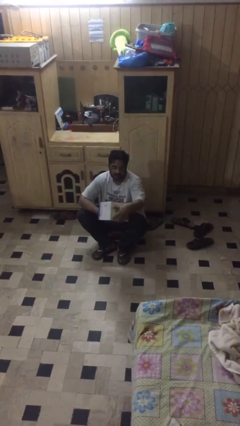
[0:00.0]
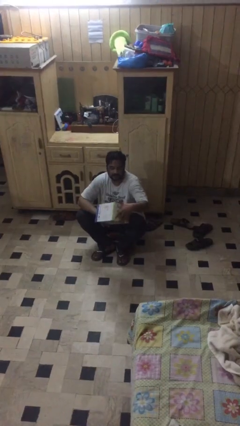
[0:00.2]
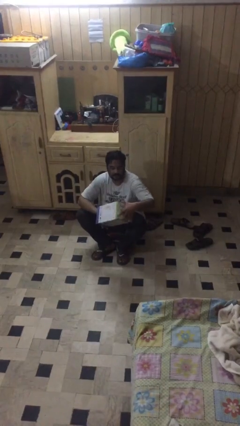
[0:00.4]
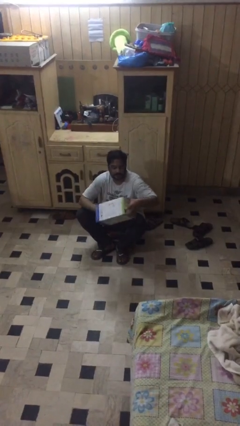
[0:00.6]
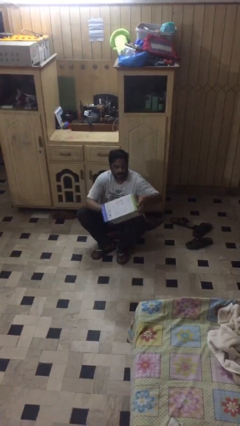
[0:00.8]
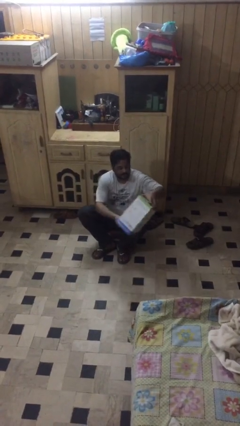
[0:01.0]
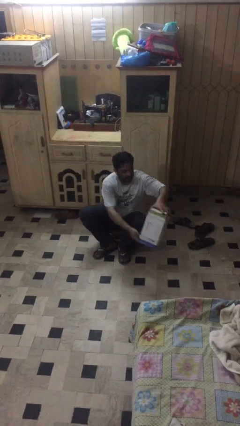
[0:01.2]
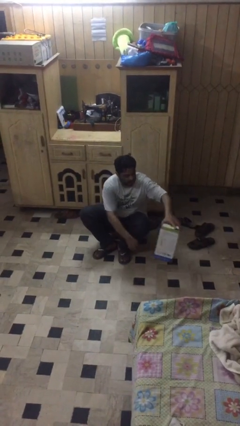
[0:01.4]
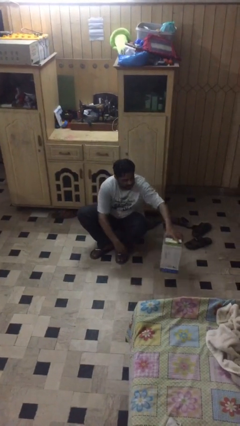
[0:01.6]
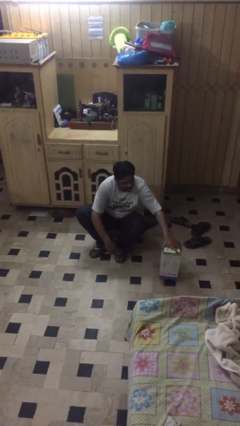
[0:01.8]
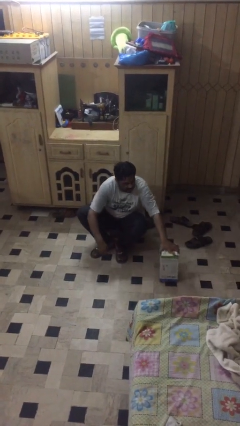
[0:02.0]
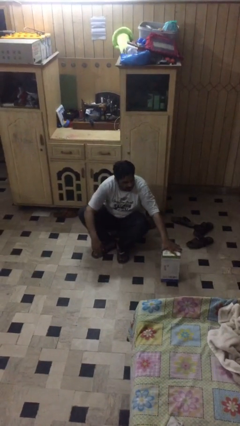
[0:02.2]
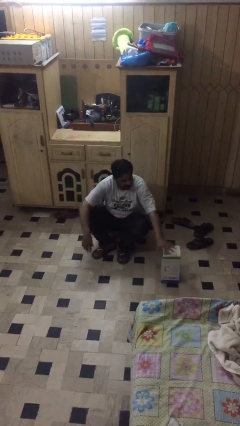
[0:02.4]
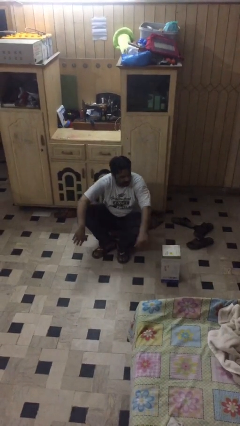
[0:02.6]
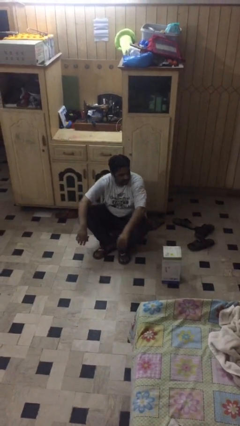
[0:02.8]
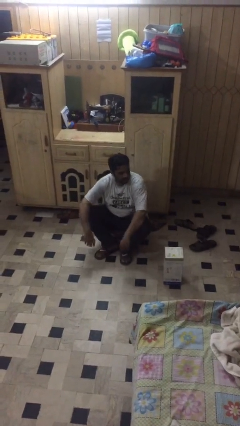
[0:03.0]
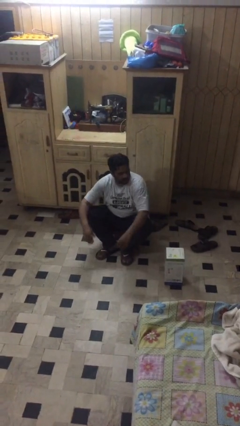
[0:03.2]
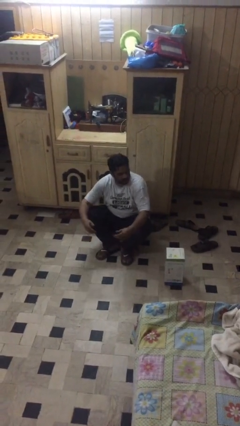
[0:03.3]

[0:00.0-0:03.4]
person puts down object on floor

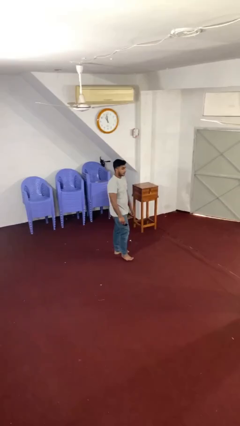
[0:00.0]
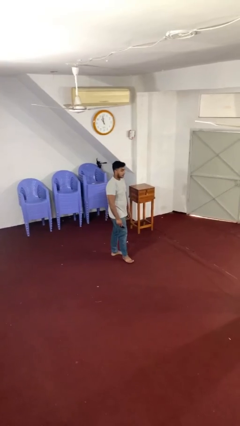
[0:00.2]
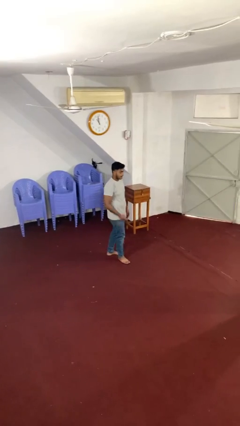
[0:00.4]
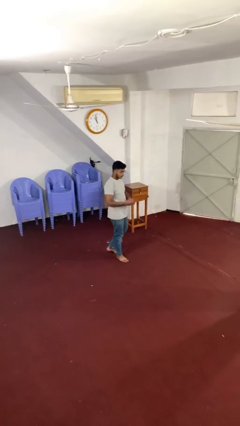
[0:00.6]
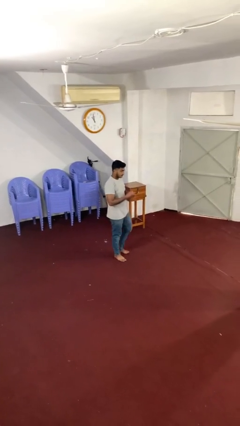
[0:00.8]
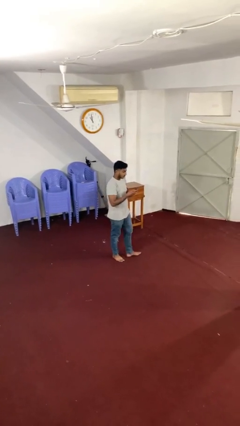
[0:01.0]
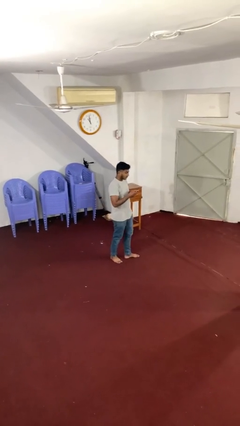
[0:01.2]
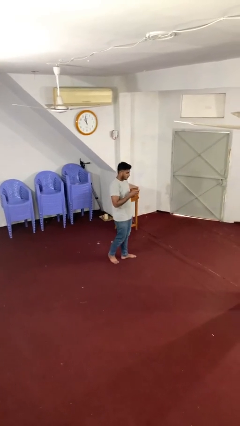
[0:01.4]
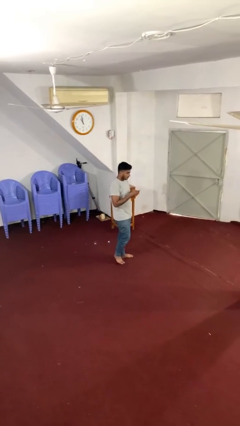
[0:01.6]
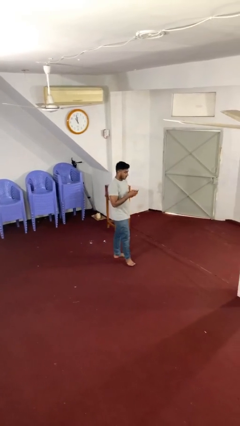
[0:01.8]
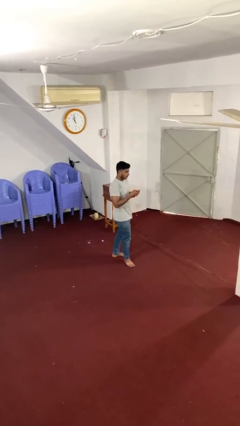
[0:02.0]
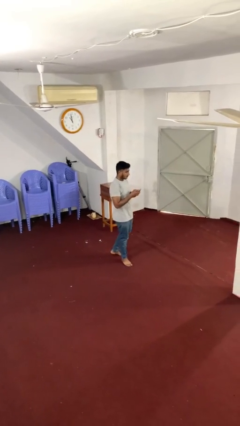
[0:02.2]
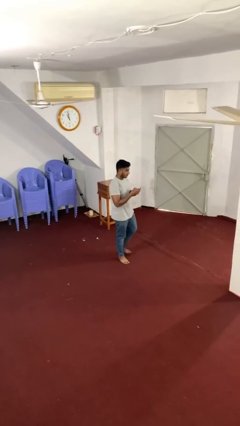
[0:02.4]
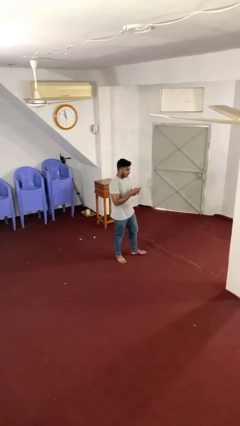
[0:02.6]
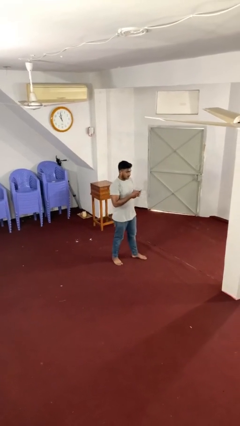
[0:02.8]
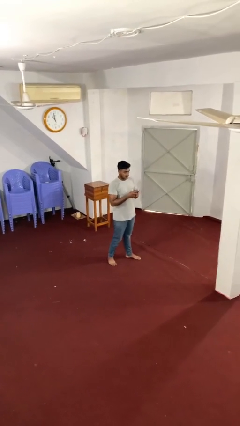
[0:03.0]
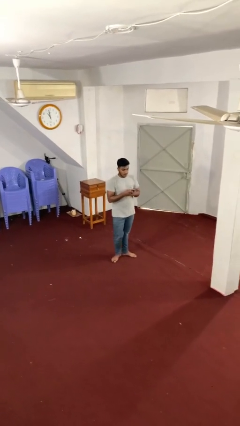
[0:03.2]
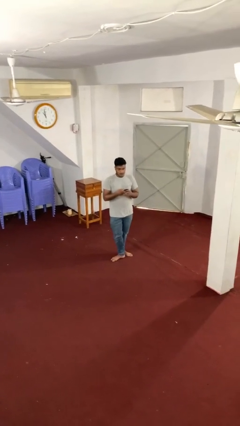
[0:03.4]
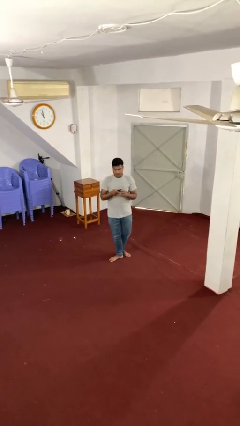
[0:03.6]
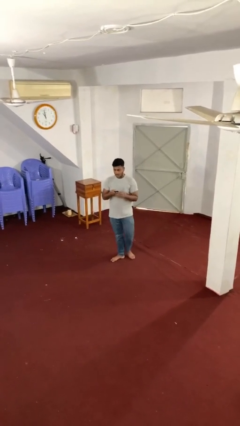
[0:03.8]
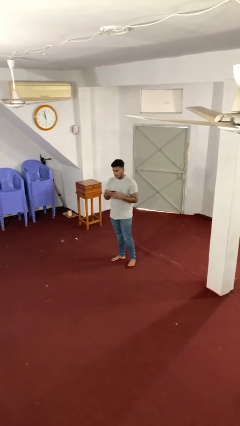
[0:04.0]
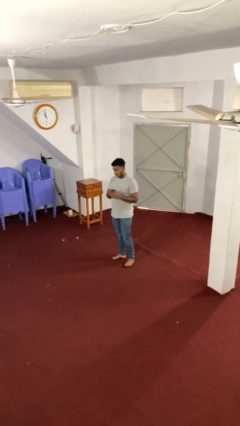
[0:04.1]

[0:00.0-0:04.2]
person texts on phone

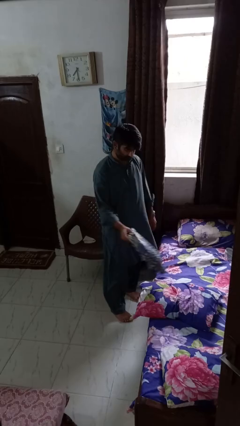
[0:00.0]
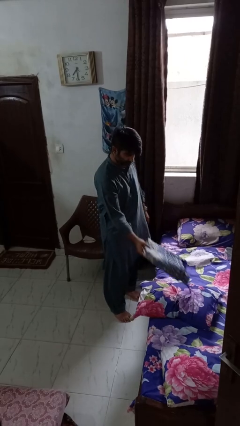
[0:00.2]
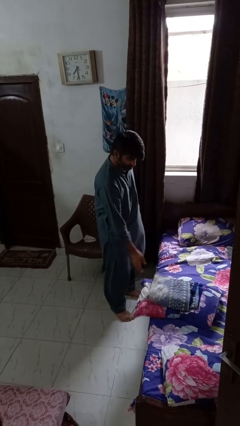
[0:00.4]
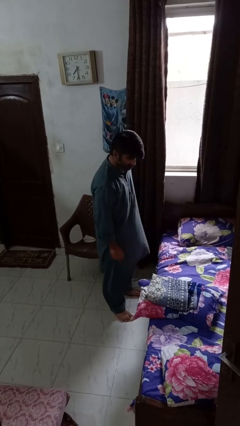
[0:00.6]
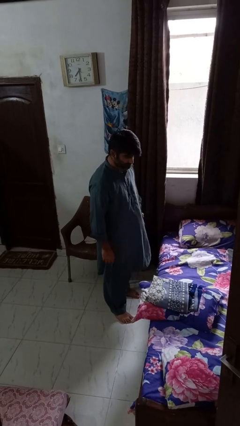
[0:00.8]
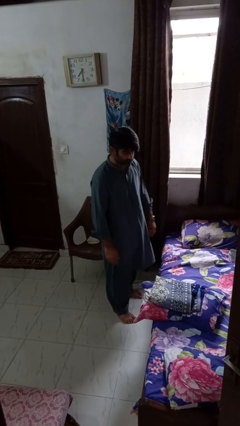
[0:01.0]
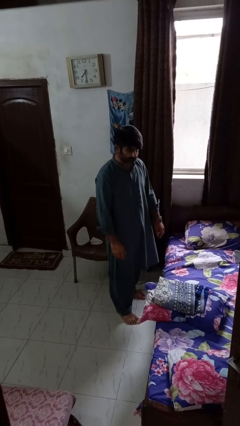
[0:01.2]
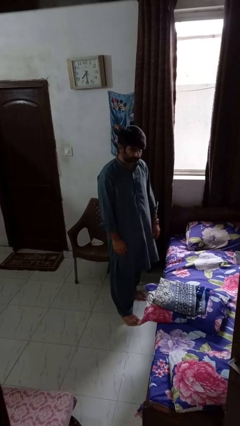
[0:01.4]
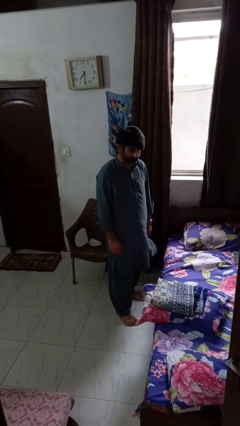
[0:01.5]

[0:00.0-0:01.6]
person puts down object on bed

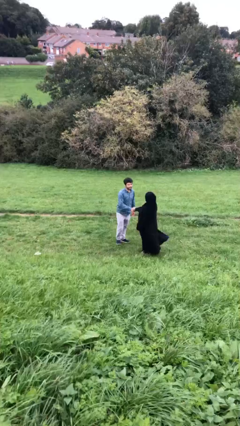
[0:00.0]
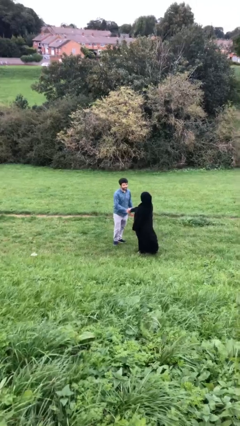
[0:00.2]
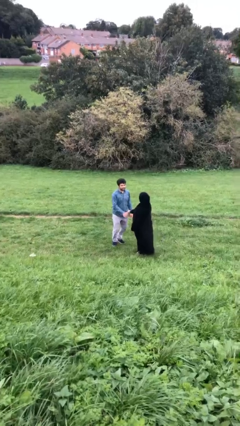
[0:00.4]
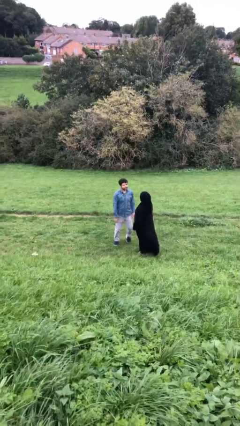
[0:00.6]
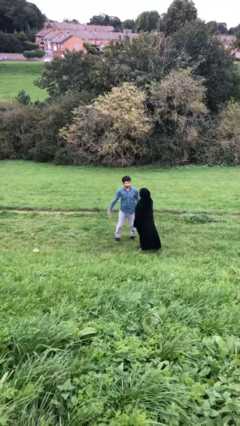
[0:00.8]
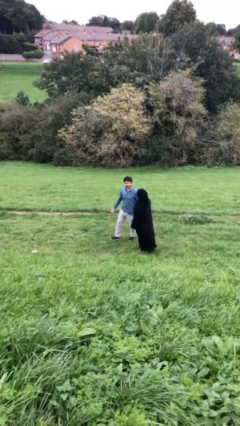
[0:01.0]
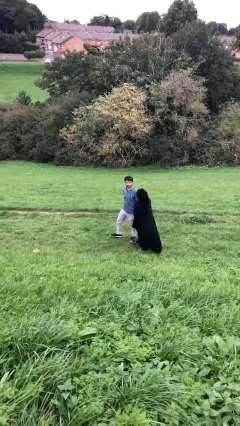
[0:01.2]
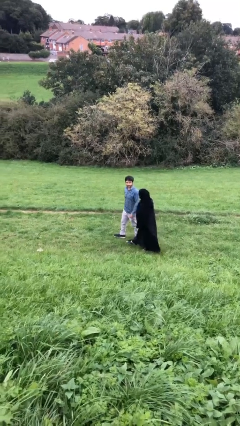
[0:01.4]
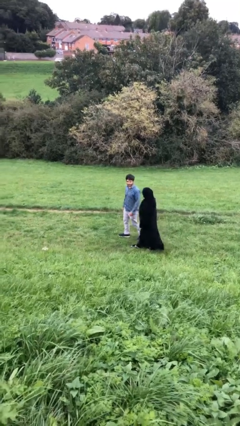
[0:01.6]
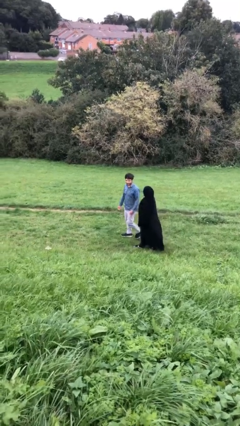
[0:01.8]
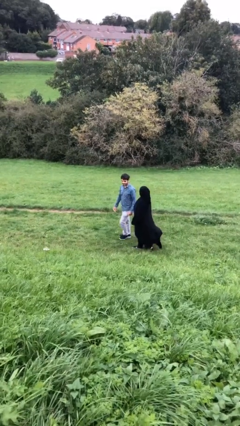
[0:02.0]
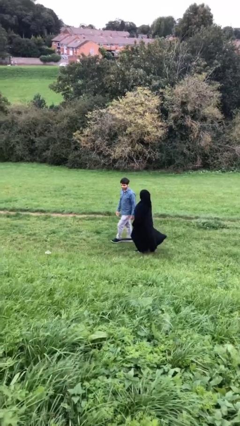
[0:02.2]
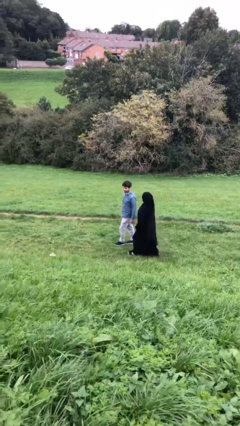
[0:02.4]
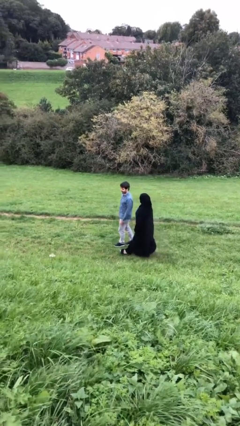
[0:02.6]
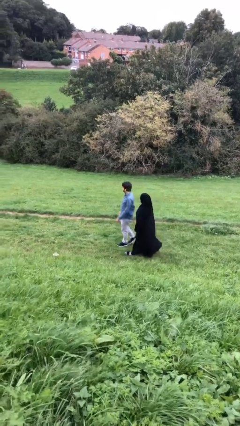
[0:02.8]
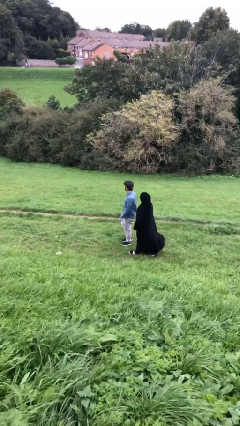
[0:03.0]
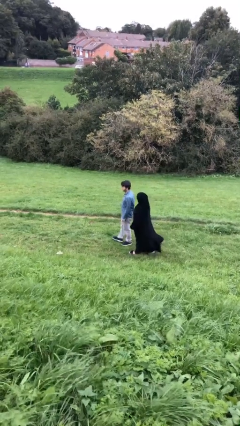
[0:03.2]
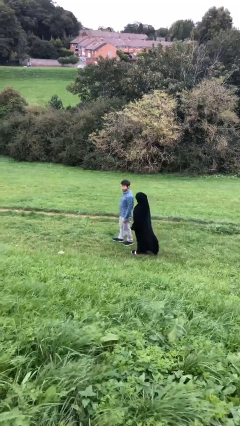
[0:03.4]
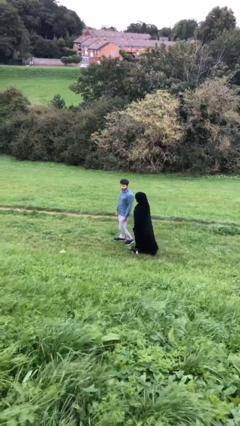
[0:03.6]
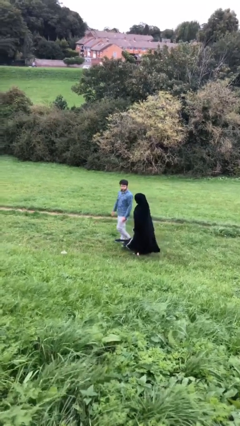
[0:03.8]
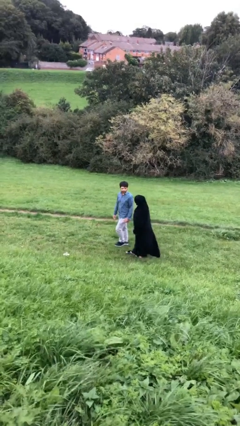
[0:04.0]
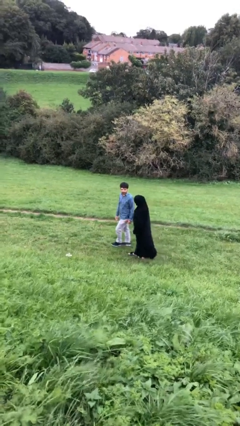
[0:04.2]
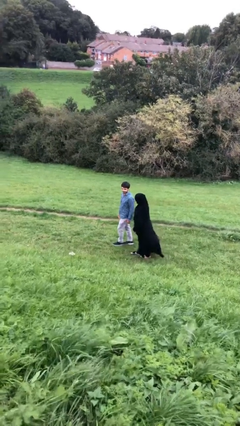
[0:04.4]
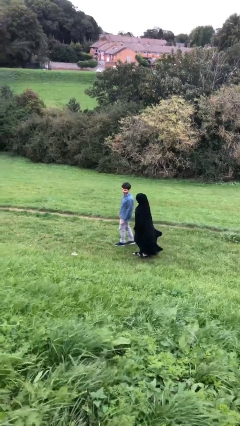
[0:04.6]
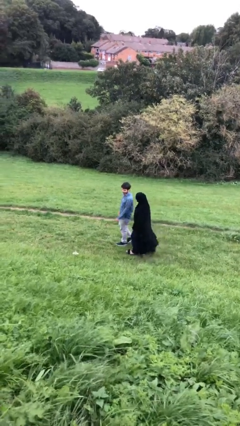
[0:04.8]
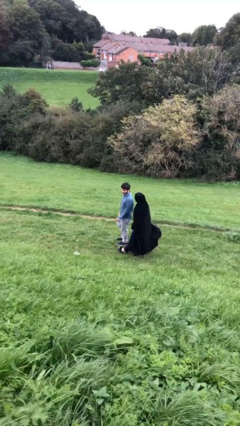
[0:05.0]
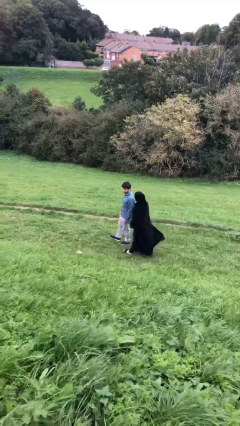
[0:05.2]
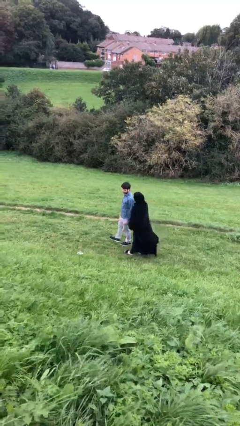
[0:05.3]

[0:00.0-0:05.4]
person talks to person

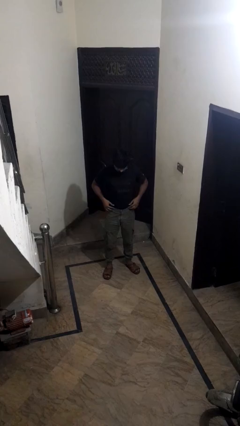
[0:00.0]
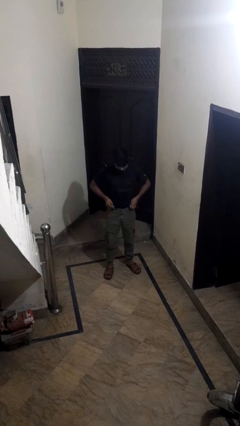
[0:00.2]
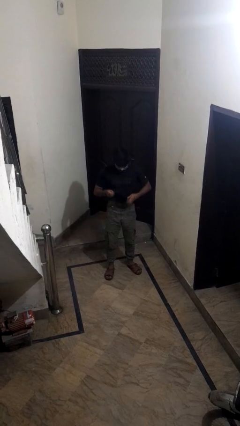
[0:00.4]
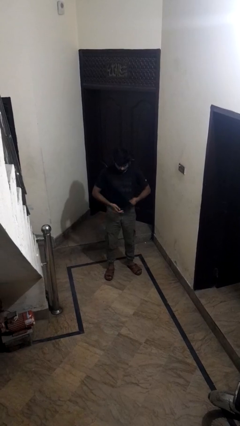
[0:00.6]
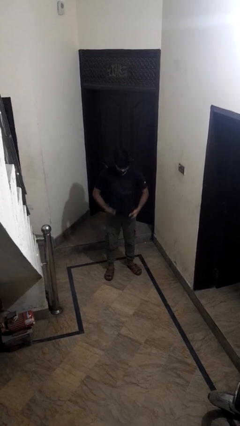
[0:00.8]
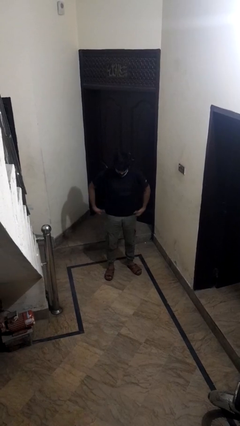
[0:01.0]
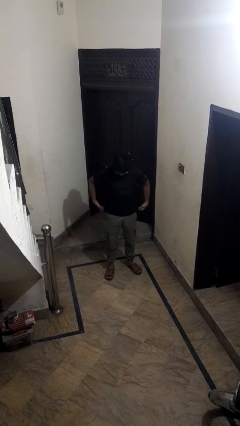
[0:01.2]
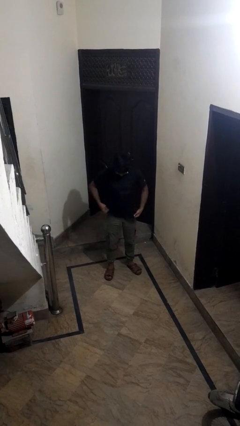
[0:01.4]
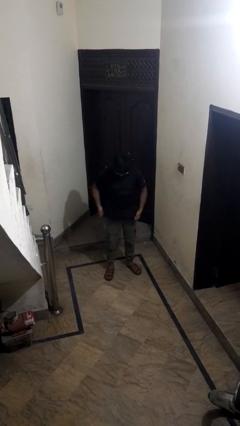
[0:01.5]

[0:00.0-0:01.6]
person untucks shirt

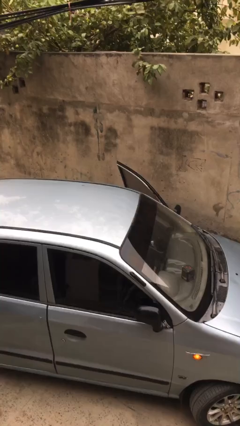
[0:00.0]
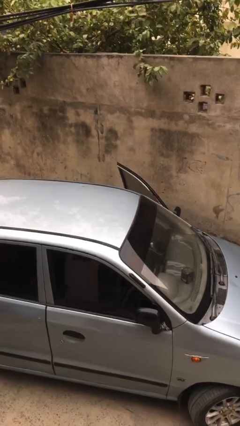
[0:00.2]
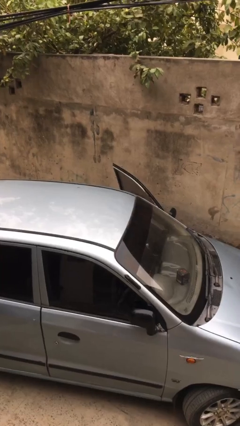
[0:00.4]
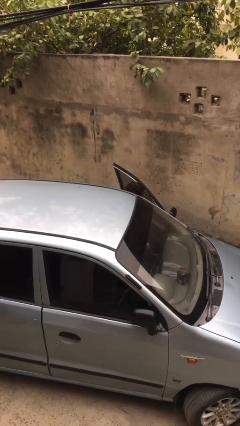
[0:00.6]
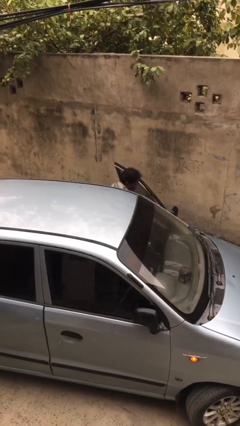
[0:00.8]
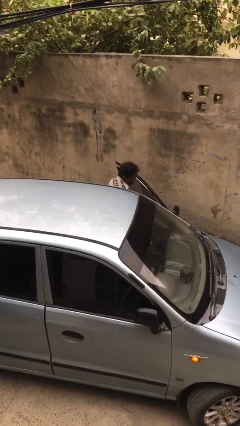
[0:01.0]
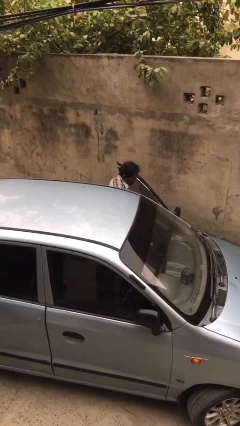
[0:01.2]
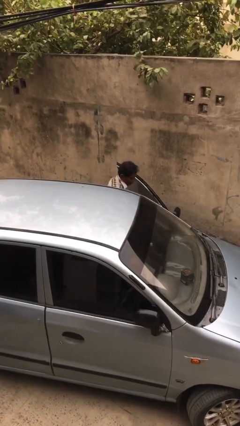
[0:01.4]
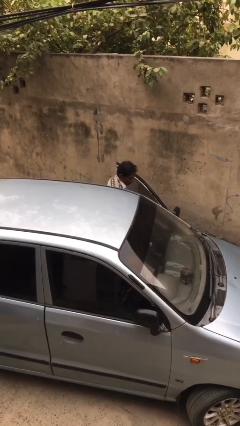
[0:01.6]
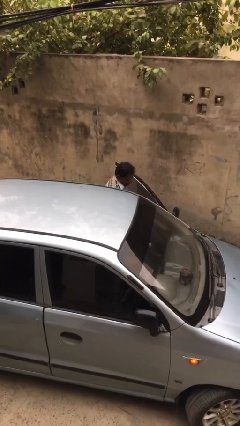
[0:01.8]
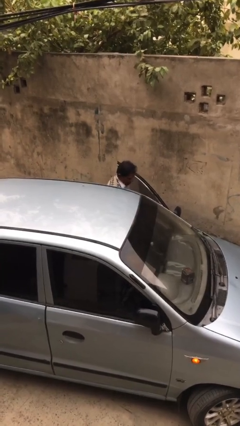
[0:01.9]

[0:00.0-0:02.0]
person exits car
